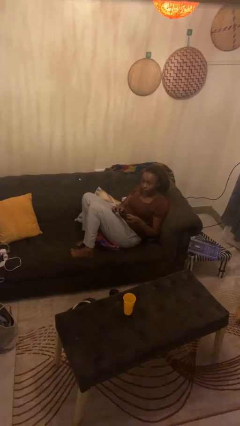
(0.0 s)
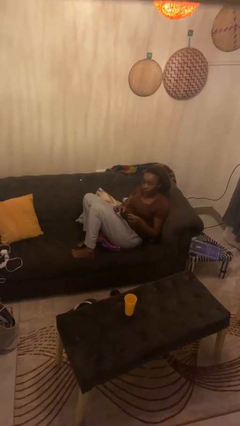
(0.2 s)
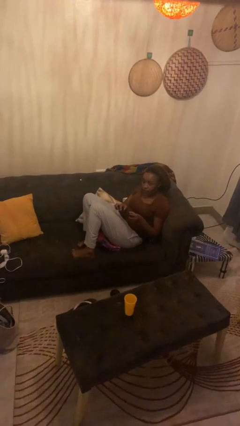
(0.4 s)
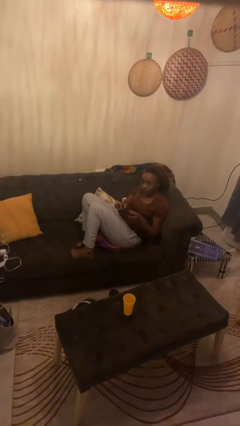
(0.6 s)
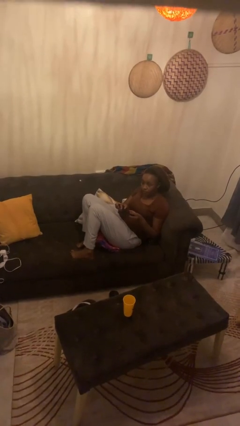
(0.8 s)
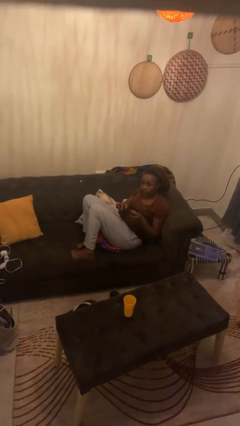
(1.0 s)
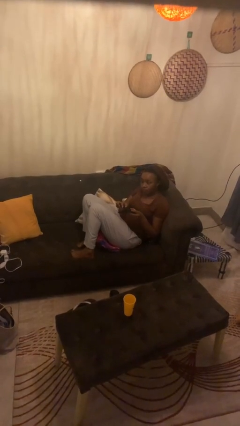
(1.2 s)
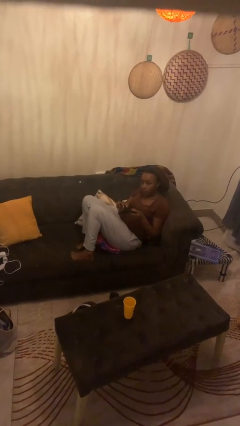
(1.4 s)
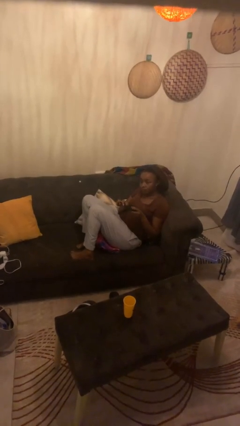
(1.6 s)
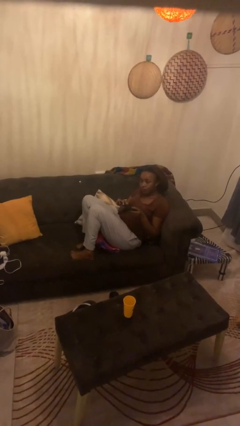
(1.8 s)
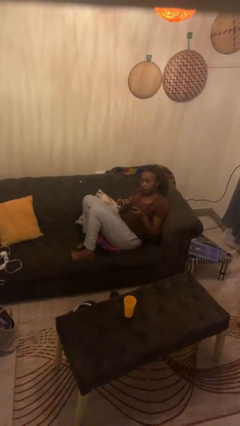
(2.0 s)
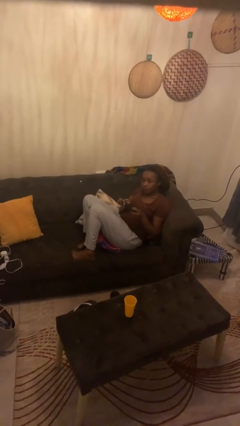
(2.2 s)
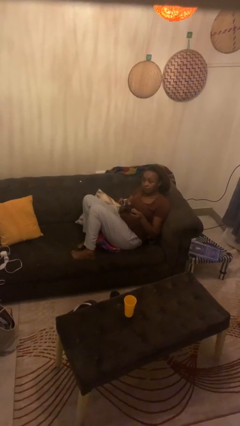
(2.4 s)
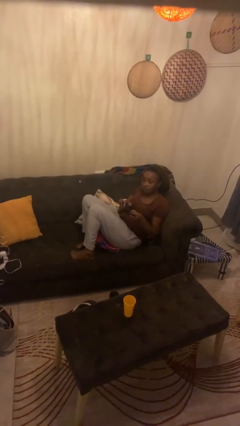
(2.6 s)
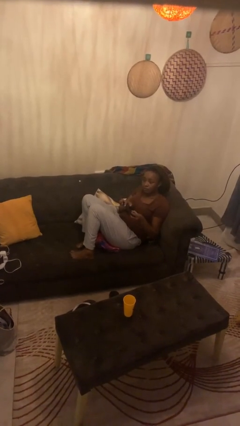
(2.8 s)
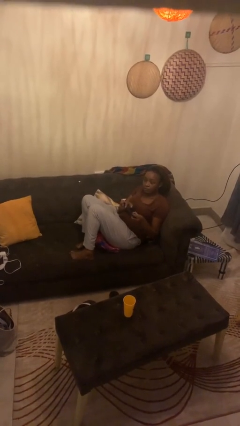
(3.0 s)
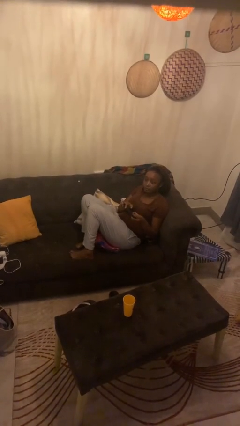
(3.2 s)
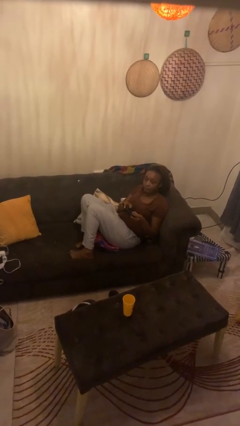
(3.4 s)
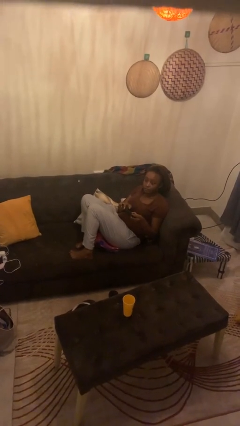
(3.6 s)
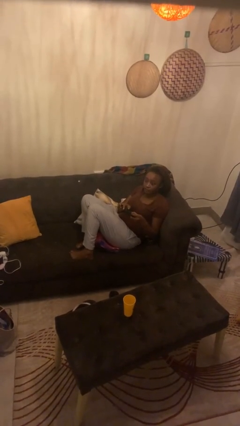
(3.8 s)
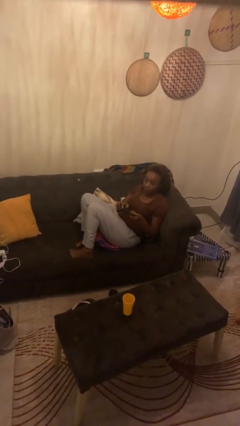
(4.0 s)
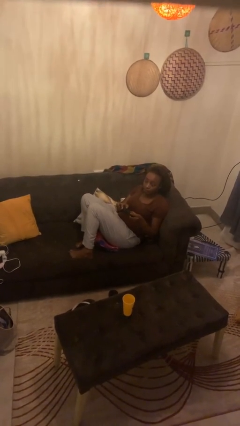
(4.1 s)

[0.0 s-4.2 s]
person interacts with handheld game

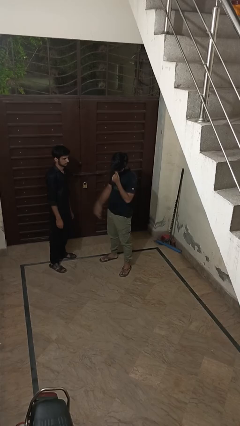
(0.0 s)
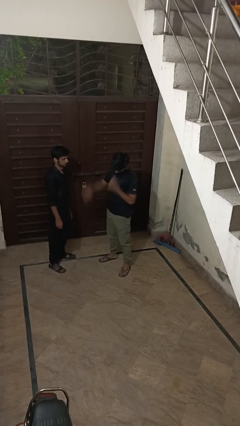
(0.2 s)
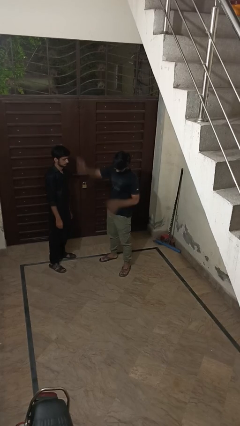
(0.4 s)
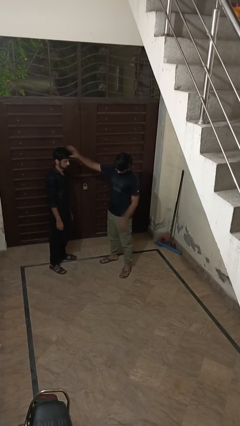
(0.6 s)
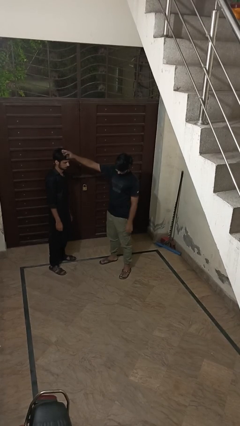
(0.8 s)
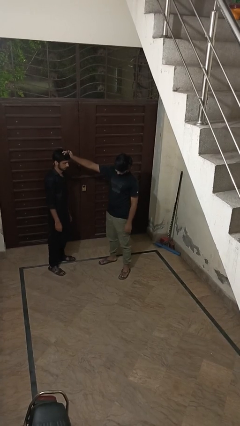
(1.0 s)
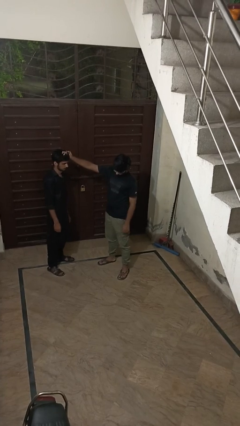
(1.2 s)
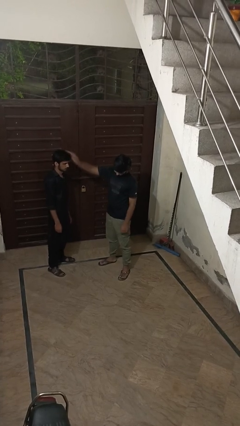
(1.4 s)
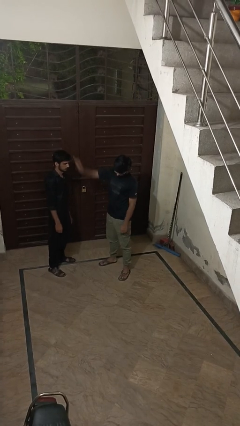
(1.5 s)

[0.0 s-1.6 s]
person grabs person by hair

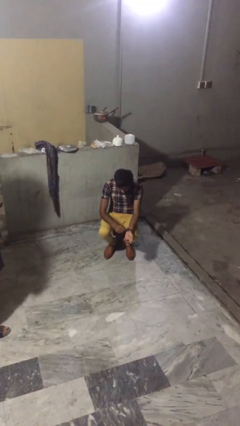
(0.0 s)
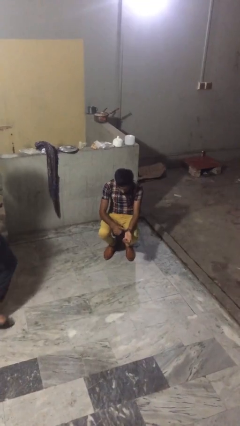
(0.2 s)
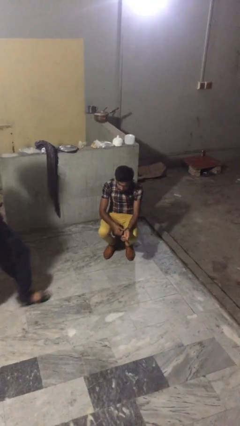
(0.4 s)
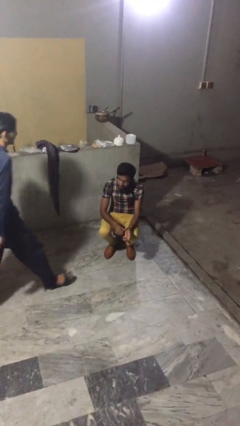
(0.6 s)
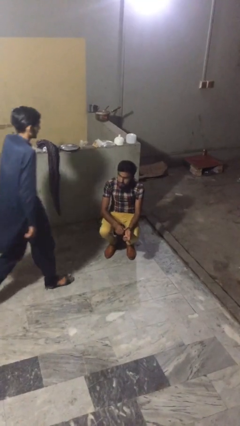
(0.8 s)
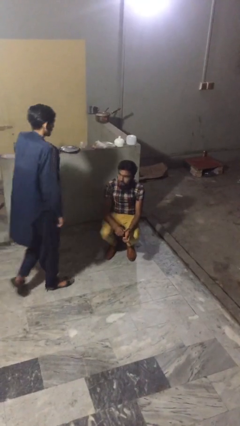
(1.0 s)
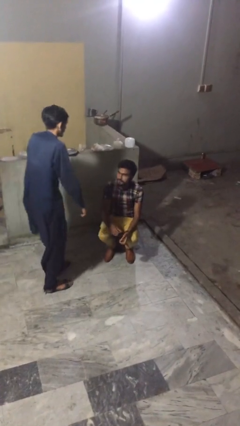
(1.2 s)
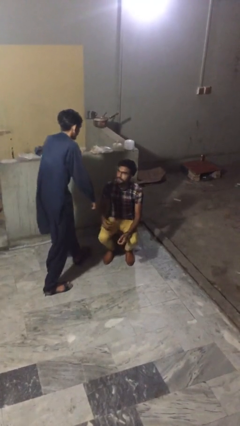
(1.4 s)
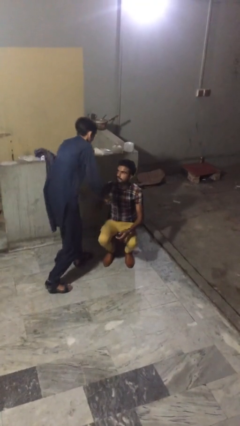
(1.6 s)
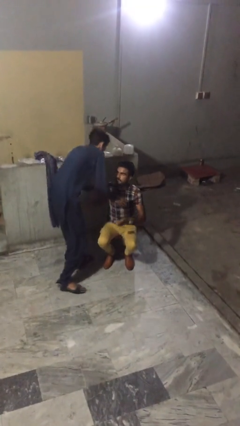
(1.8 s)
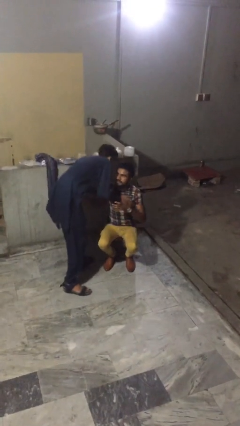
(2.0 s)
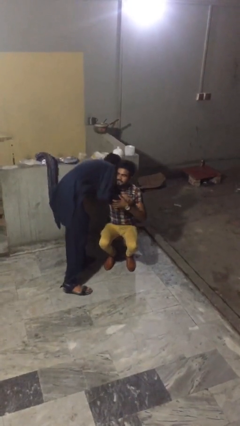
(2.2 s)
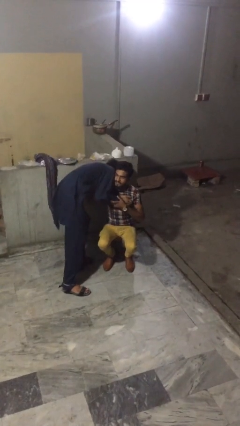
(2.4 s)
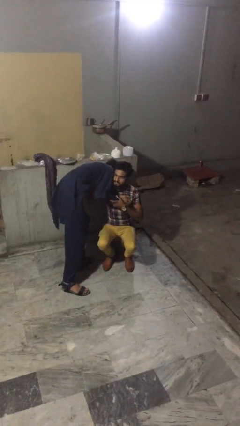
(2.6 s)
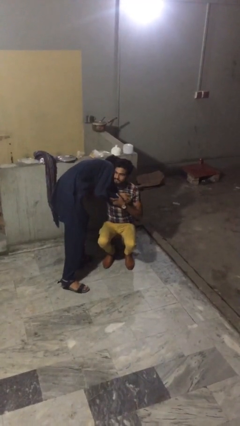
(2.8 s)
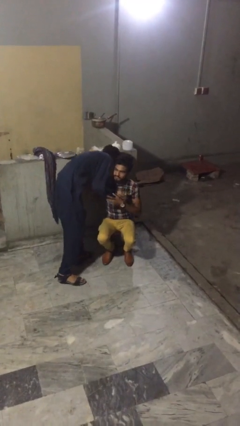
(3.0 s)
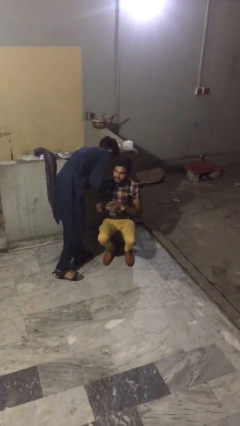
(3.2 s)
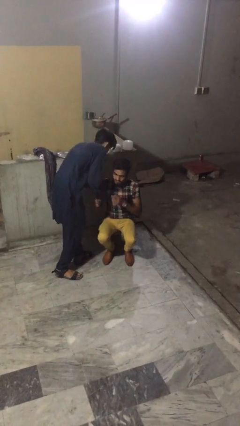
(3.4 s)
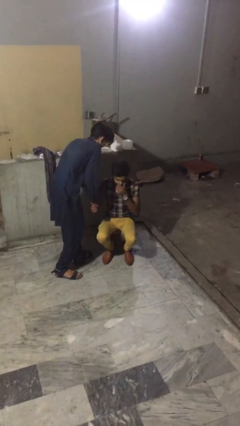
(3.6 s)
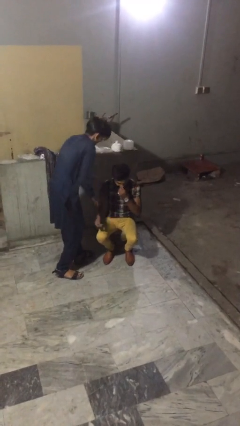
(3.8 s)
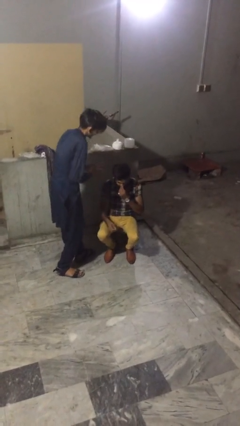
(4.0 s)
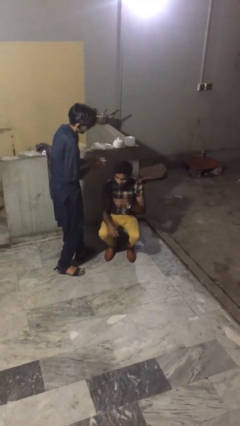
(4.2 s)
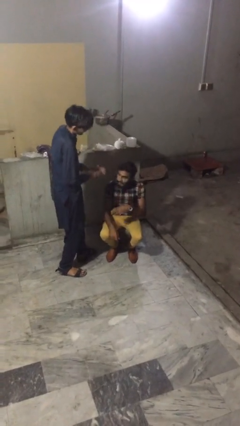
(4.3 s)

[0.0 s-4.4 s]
person embraces person

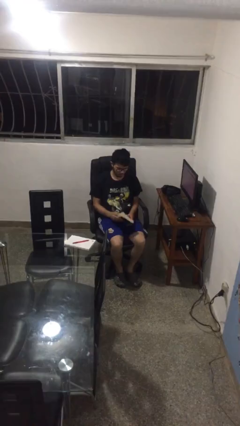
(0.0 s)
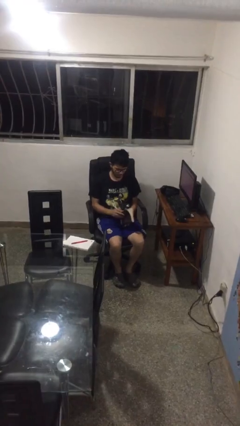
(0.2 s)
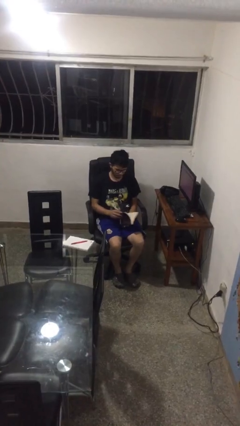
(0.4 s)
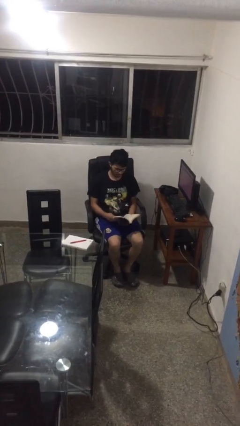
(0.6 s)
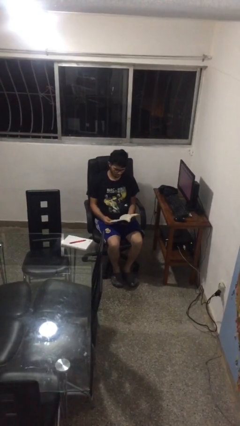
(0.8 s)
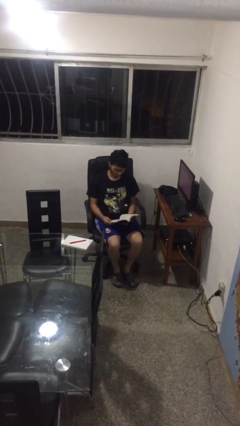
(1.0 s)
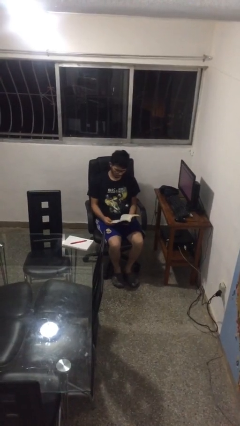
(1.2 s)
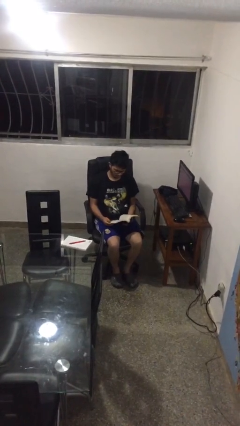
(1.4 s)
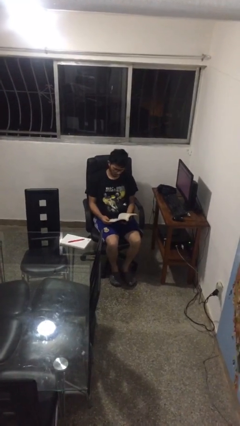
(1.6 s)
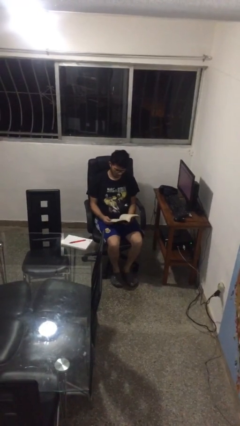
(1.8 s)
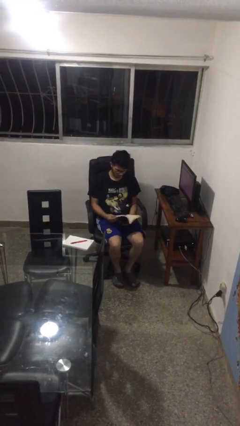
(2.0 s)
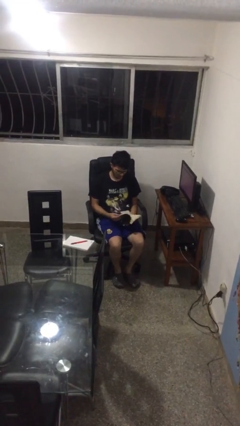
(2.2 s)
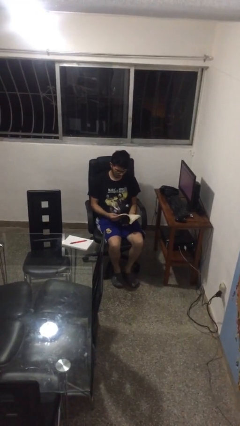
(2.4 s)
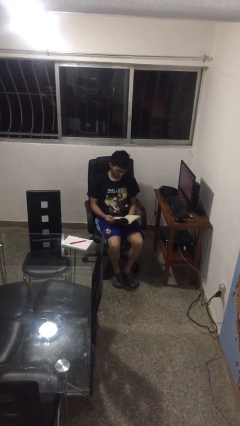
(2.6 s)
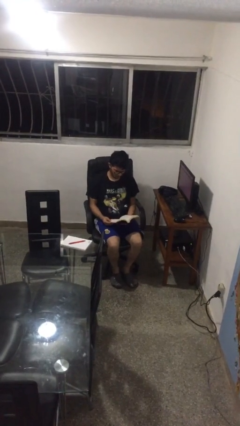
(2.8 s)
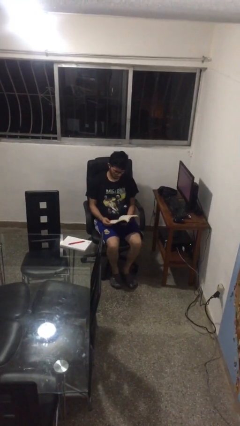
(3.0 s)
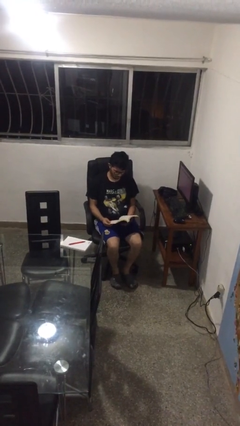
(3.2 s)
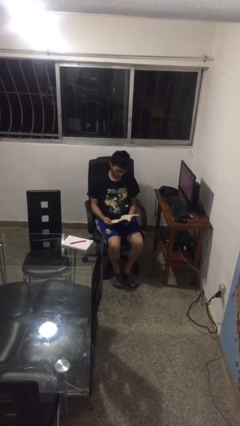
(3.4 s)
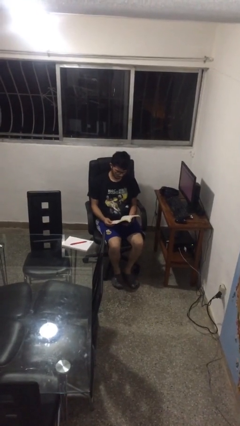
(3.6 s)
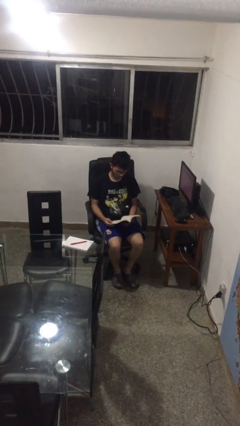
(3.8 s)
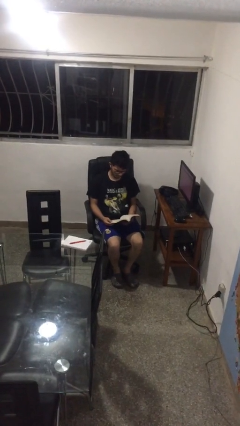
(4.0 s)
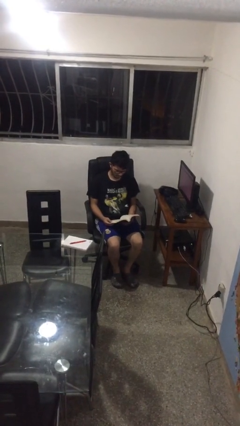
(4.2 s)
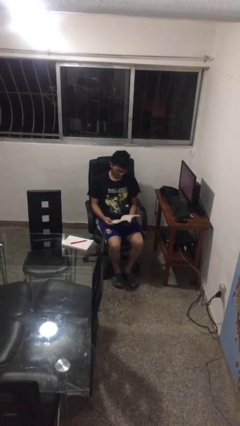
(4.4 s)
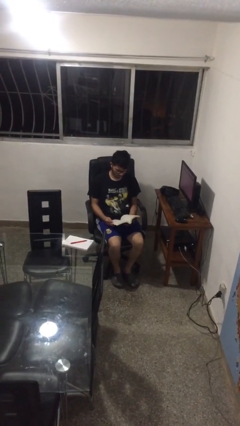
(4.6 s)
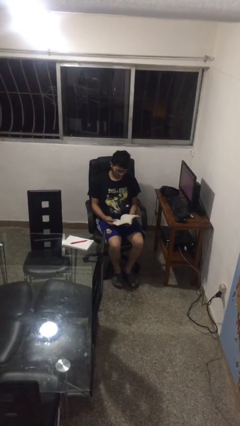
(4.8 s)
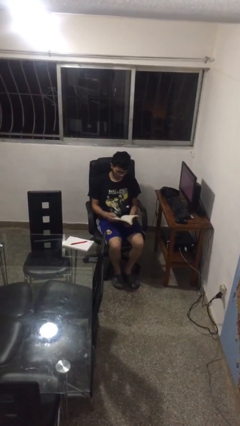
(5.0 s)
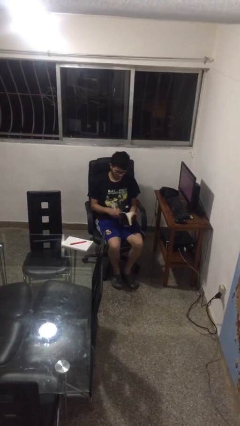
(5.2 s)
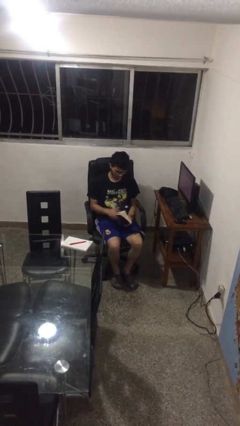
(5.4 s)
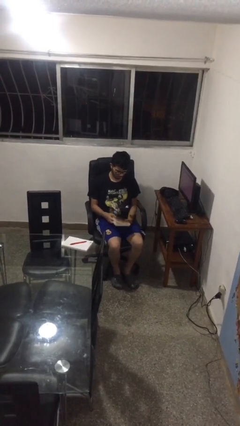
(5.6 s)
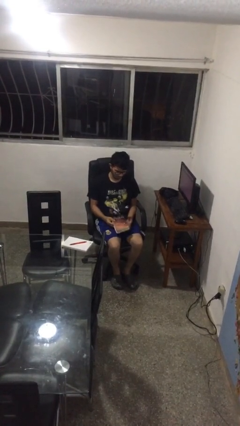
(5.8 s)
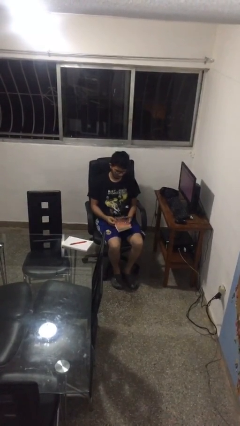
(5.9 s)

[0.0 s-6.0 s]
person reads book

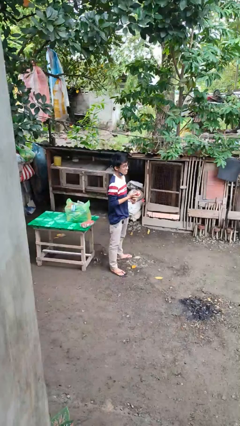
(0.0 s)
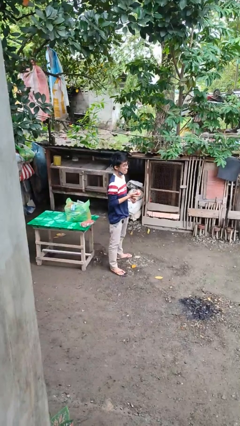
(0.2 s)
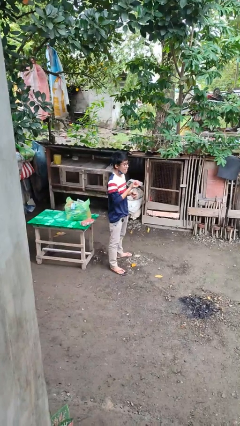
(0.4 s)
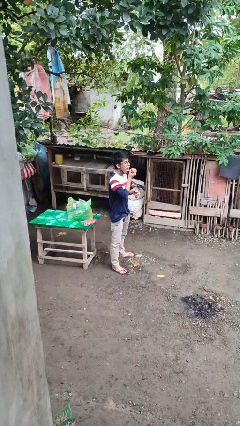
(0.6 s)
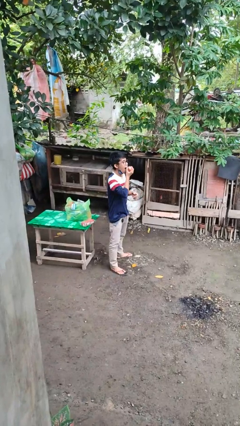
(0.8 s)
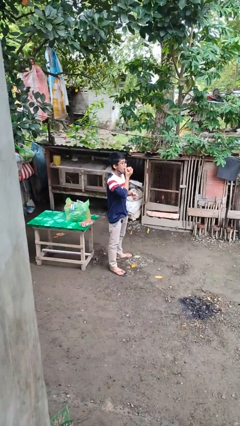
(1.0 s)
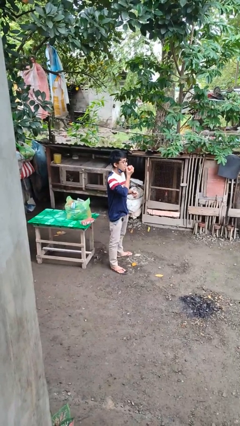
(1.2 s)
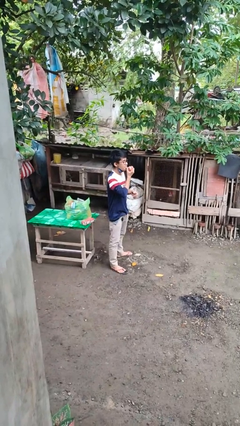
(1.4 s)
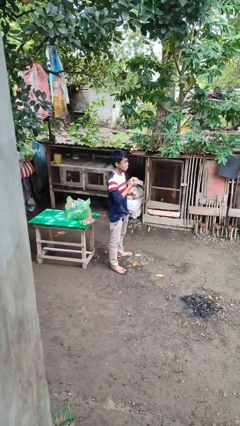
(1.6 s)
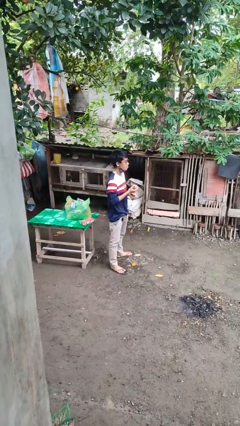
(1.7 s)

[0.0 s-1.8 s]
person eats apple
